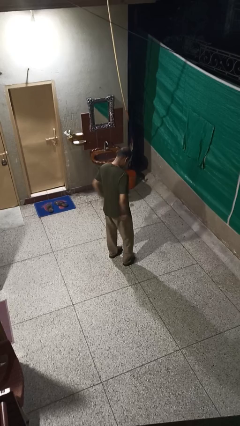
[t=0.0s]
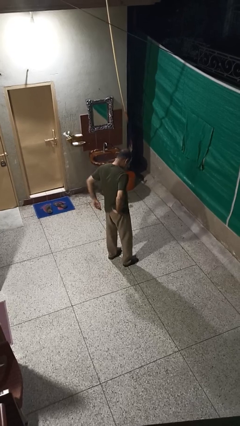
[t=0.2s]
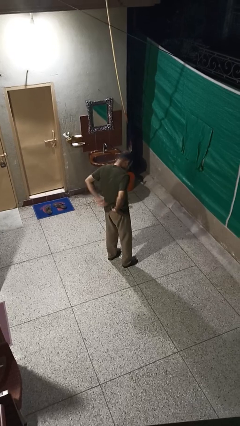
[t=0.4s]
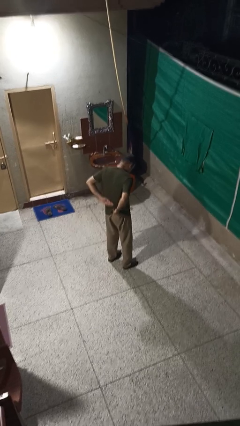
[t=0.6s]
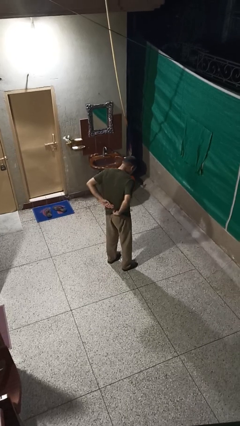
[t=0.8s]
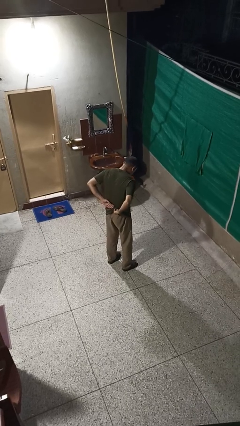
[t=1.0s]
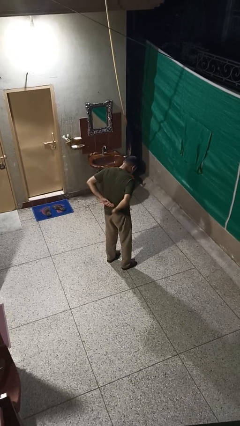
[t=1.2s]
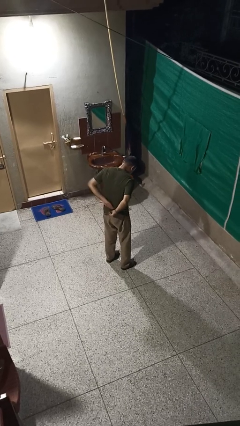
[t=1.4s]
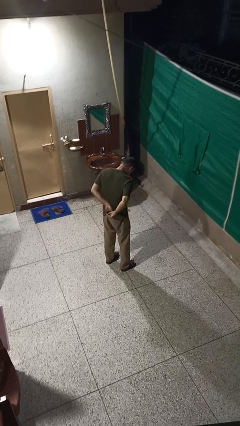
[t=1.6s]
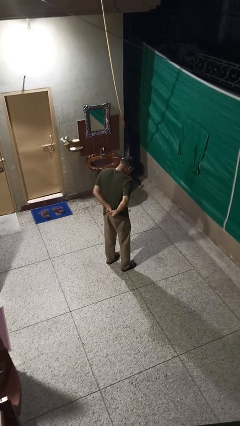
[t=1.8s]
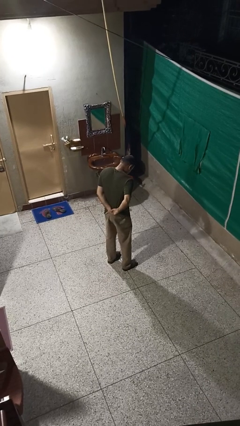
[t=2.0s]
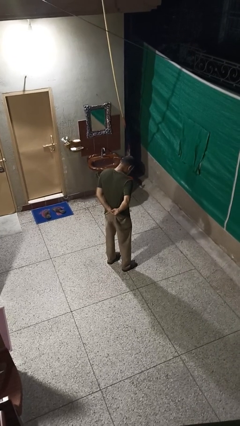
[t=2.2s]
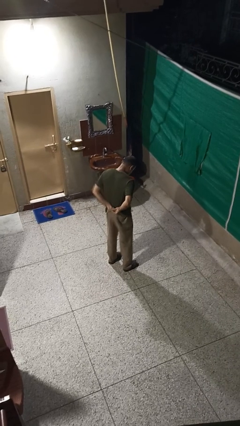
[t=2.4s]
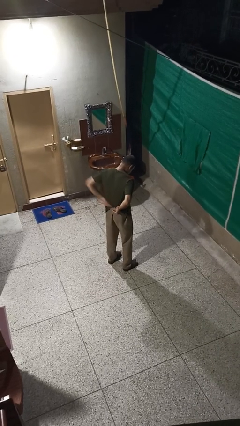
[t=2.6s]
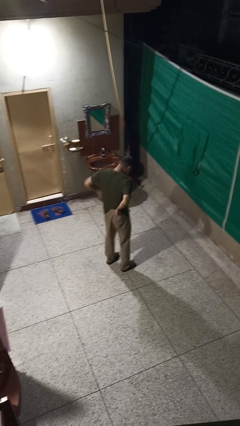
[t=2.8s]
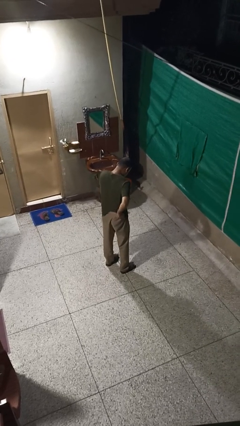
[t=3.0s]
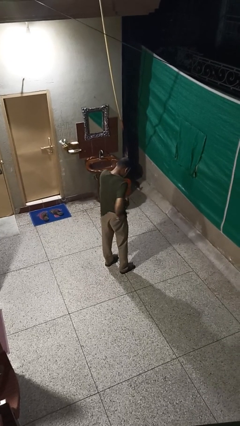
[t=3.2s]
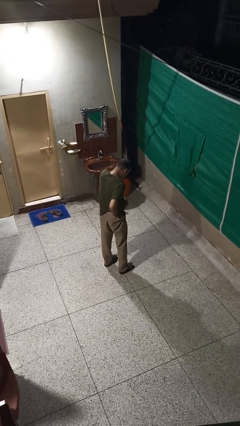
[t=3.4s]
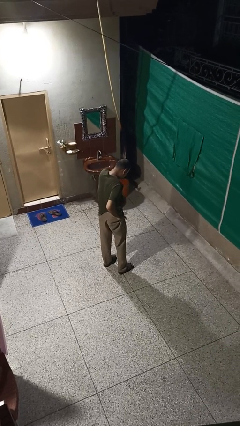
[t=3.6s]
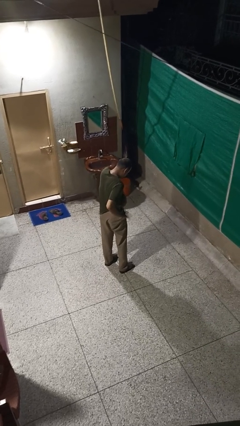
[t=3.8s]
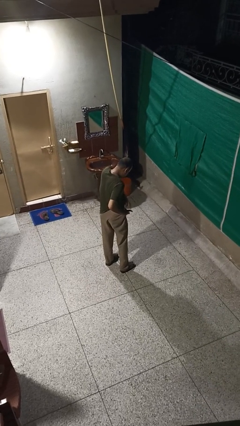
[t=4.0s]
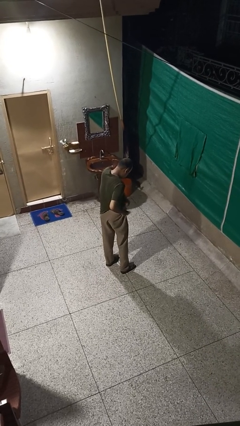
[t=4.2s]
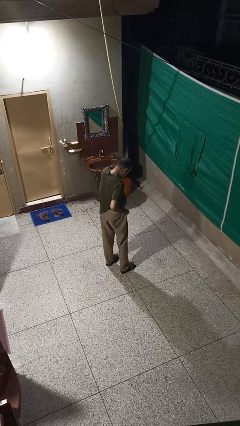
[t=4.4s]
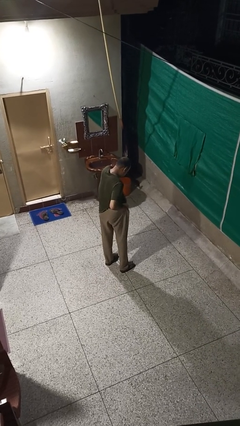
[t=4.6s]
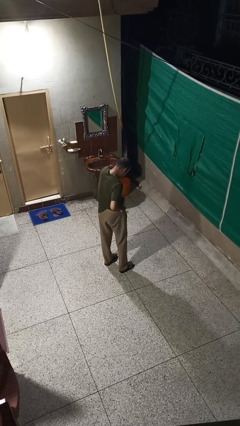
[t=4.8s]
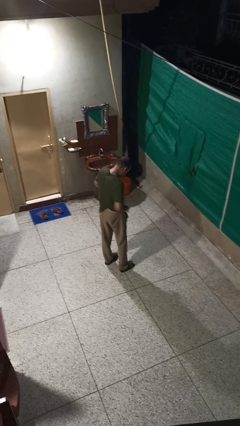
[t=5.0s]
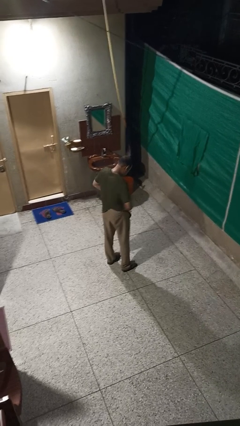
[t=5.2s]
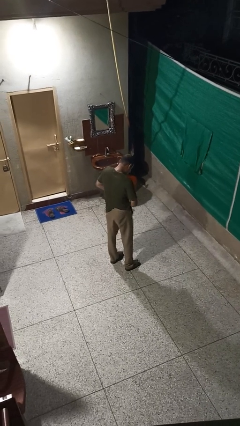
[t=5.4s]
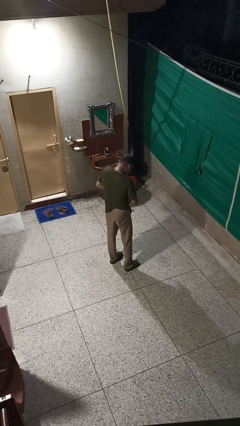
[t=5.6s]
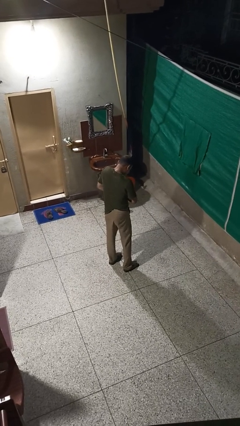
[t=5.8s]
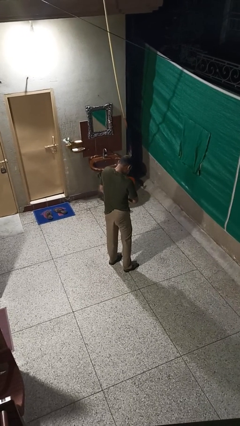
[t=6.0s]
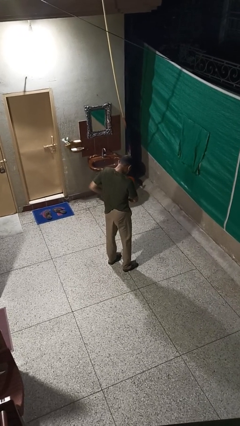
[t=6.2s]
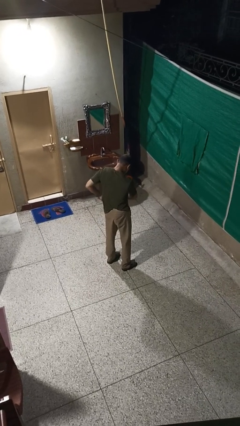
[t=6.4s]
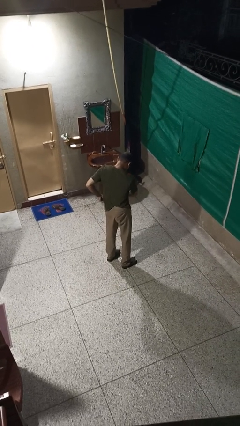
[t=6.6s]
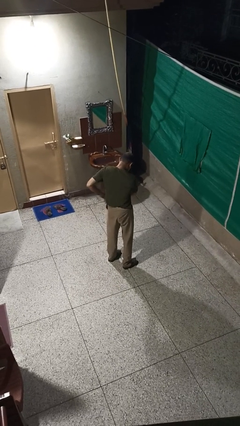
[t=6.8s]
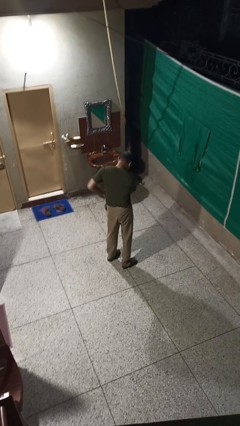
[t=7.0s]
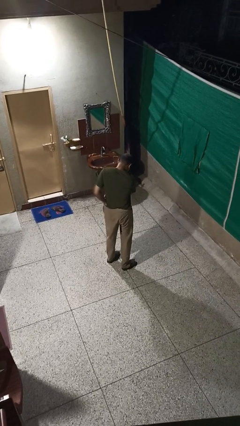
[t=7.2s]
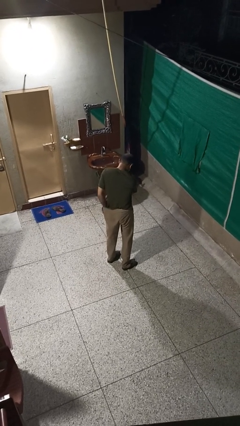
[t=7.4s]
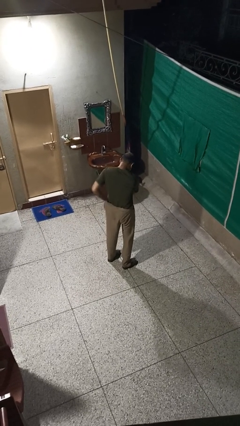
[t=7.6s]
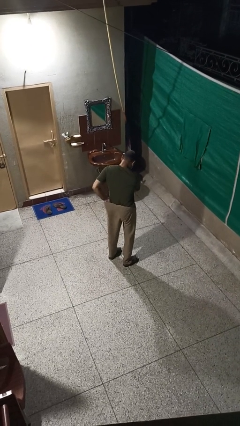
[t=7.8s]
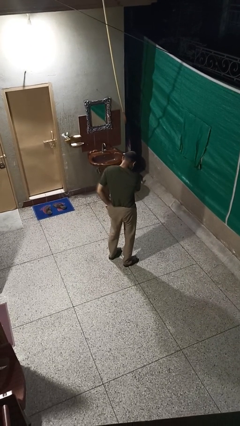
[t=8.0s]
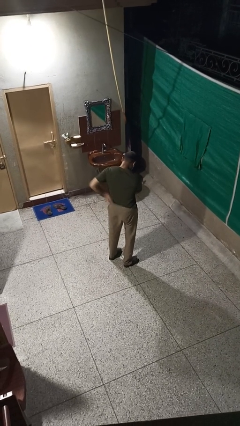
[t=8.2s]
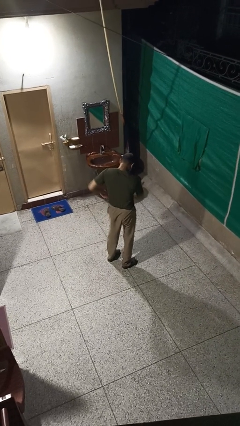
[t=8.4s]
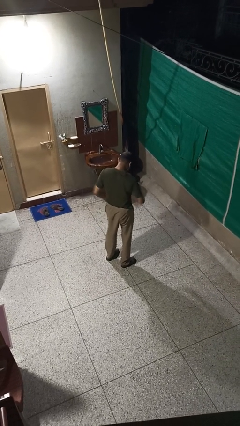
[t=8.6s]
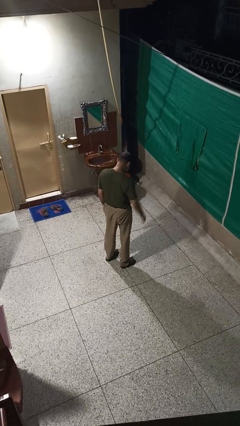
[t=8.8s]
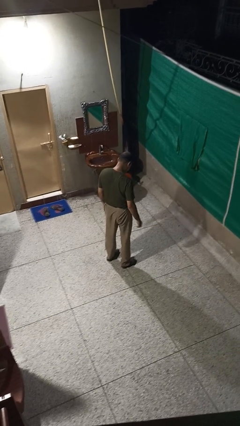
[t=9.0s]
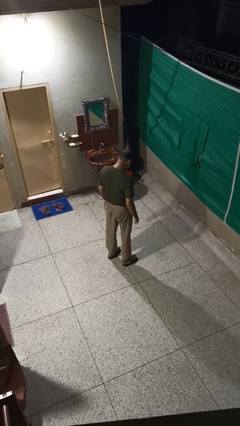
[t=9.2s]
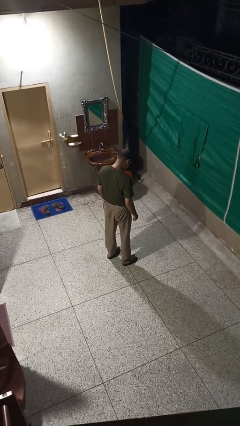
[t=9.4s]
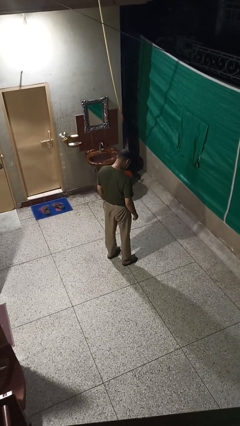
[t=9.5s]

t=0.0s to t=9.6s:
person tucks in shirt

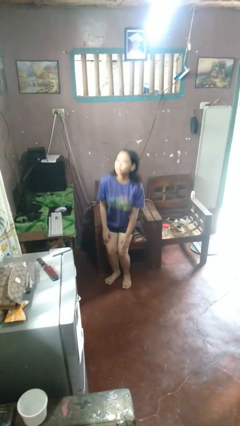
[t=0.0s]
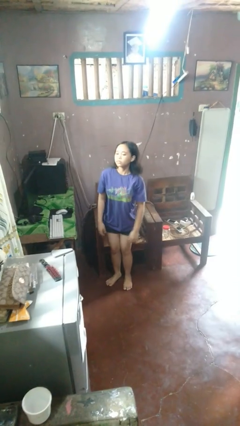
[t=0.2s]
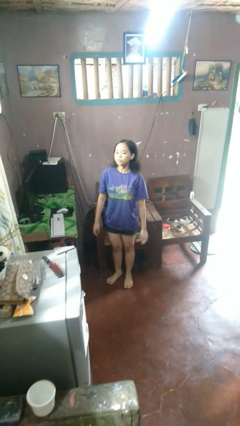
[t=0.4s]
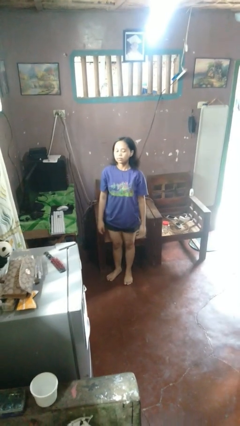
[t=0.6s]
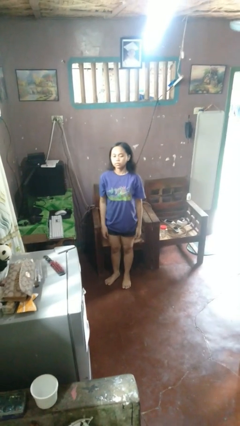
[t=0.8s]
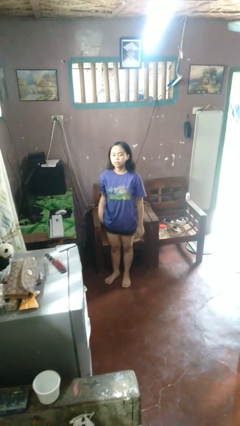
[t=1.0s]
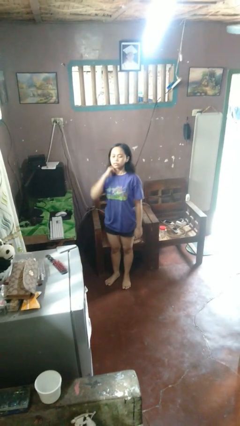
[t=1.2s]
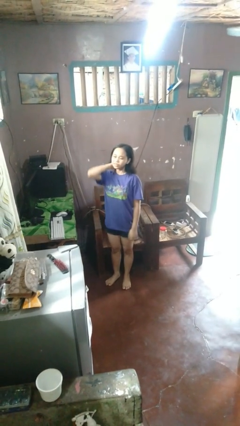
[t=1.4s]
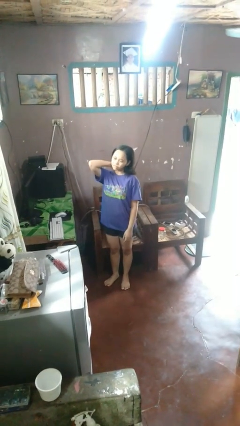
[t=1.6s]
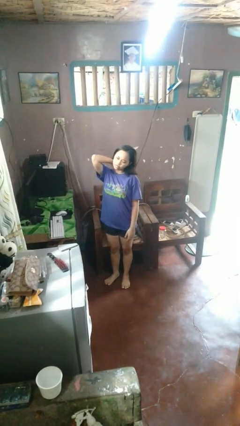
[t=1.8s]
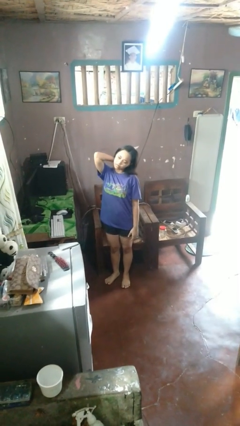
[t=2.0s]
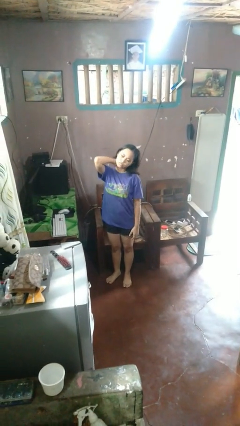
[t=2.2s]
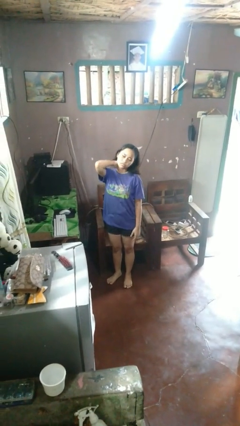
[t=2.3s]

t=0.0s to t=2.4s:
person rubs neck

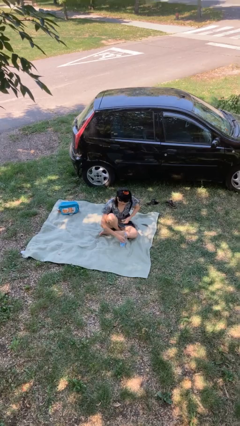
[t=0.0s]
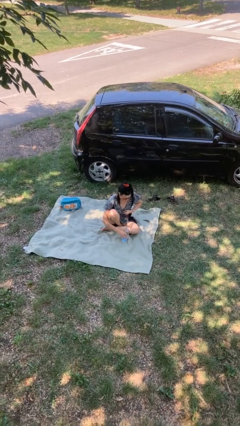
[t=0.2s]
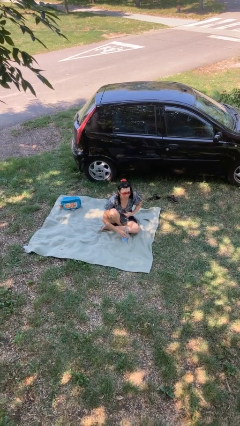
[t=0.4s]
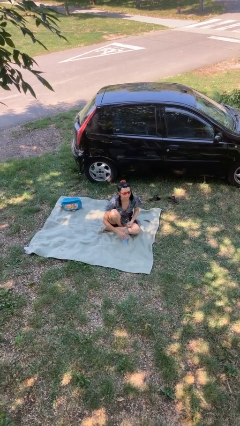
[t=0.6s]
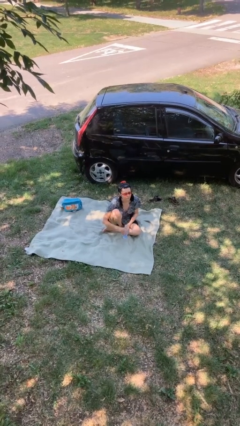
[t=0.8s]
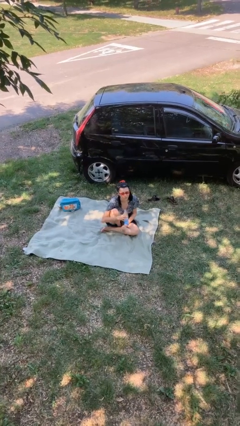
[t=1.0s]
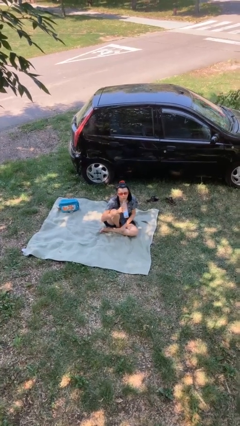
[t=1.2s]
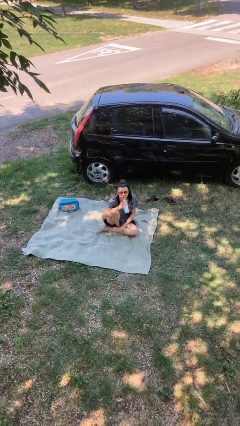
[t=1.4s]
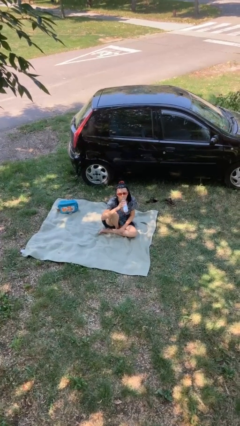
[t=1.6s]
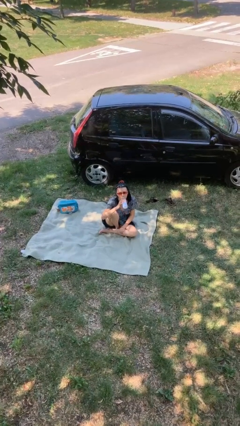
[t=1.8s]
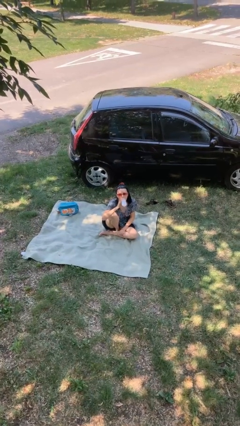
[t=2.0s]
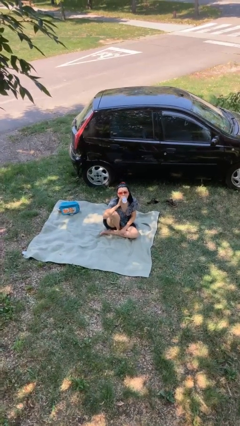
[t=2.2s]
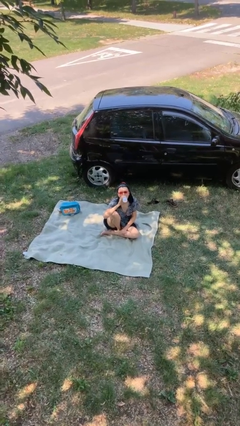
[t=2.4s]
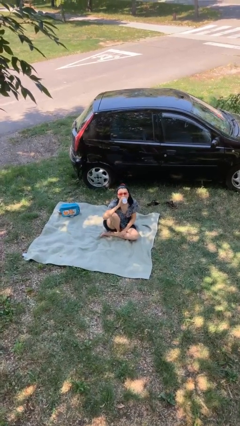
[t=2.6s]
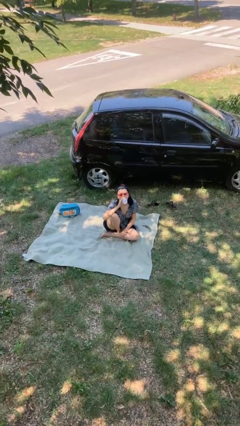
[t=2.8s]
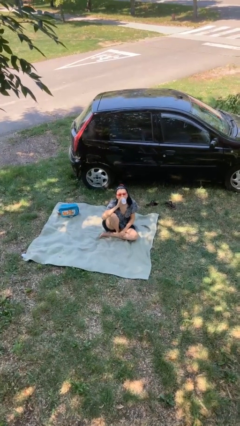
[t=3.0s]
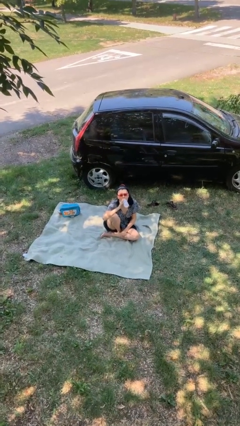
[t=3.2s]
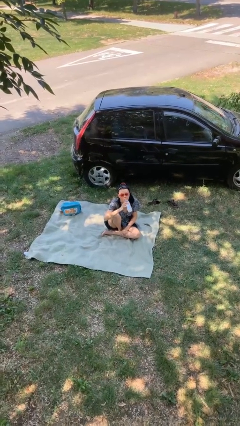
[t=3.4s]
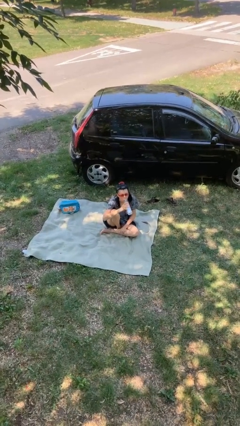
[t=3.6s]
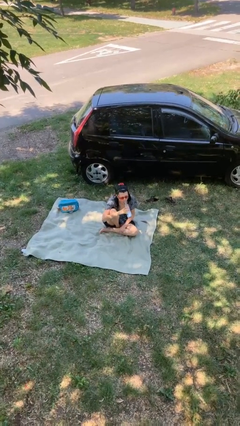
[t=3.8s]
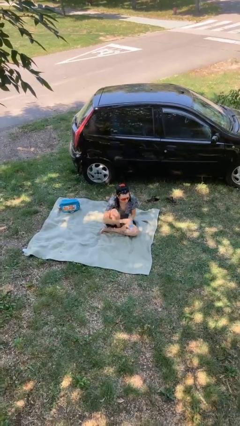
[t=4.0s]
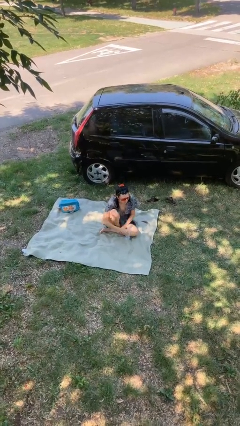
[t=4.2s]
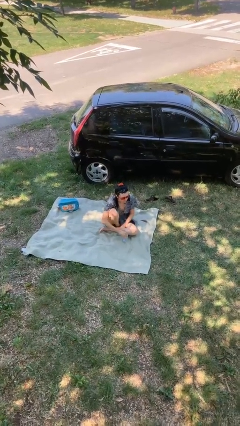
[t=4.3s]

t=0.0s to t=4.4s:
person drinks from bottle

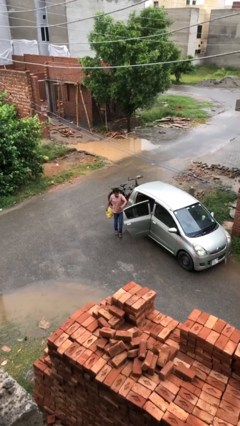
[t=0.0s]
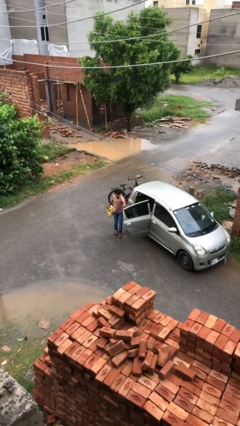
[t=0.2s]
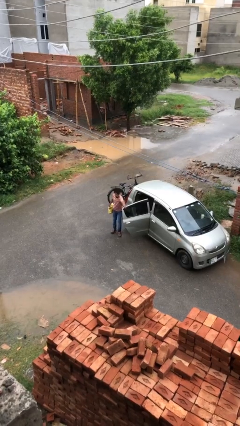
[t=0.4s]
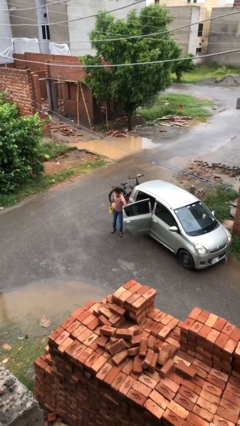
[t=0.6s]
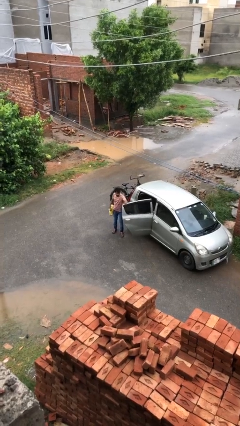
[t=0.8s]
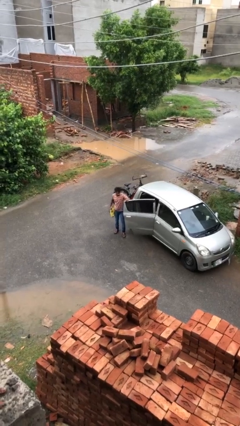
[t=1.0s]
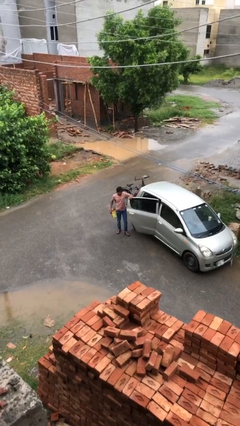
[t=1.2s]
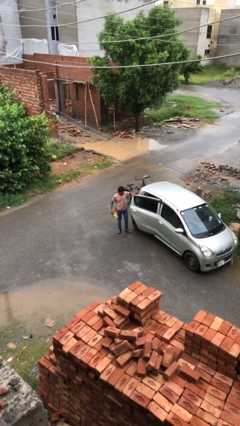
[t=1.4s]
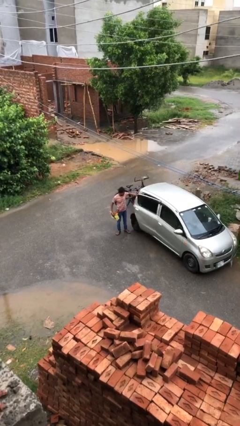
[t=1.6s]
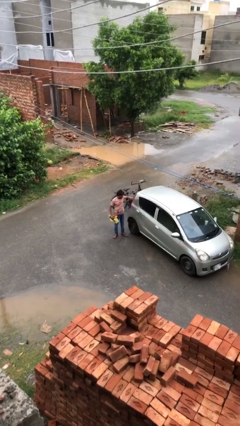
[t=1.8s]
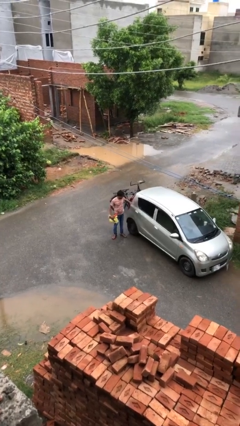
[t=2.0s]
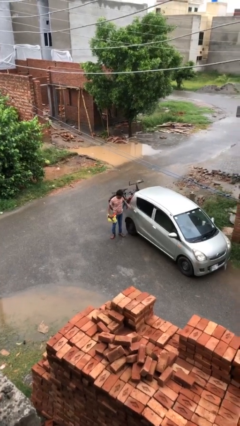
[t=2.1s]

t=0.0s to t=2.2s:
person closes car door
